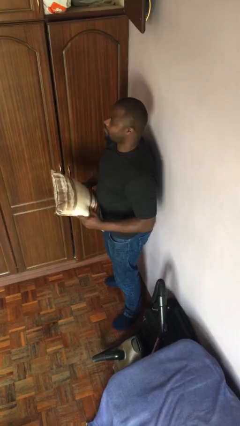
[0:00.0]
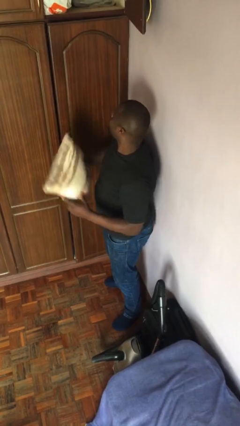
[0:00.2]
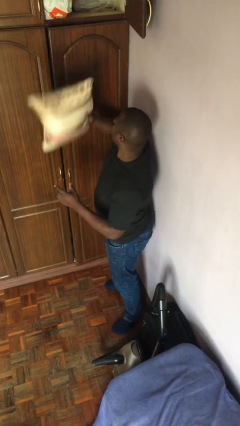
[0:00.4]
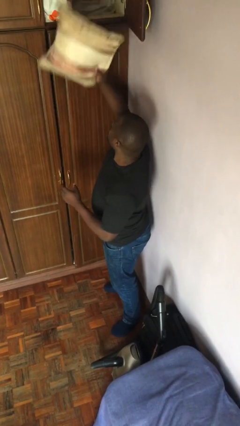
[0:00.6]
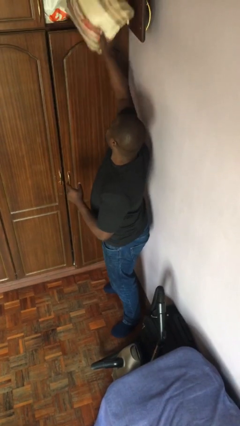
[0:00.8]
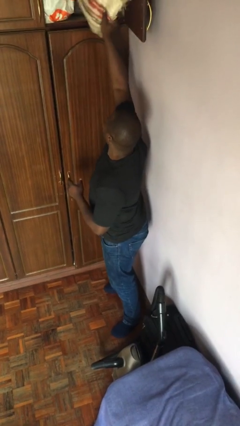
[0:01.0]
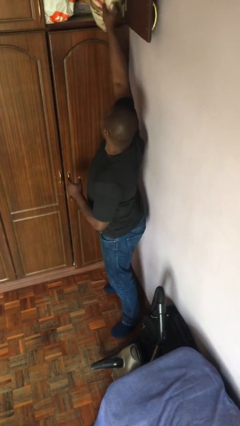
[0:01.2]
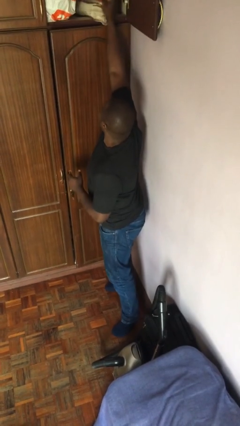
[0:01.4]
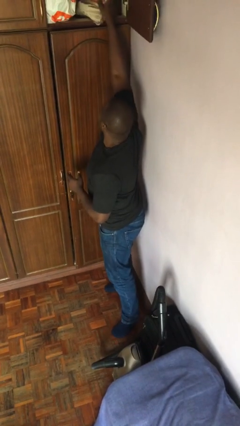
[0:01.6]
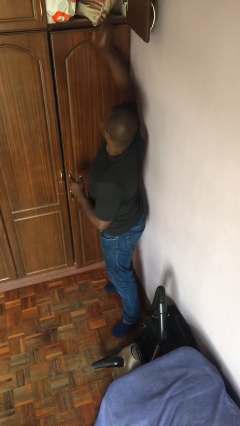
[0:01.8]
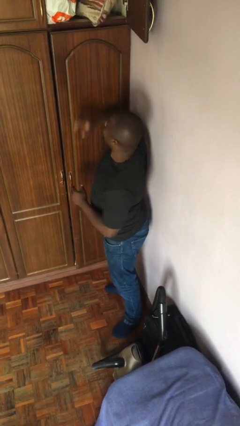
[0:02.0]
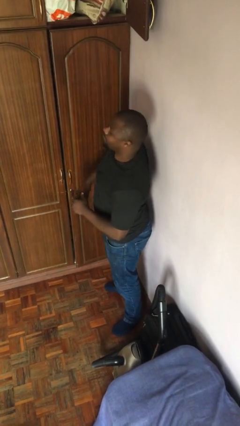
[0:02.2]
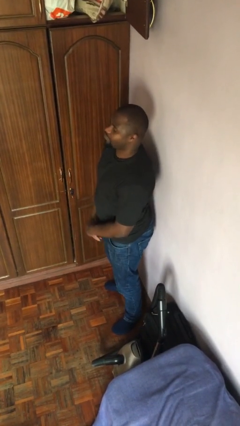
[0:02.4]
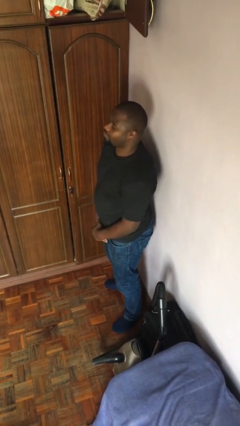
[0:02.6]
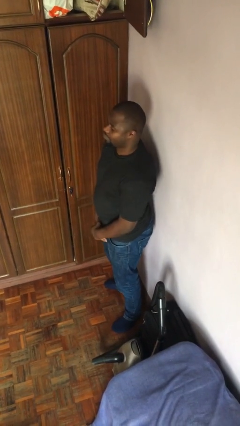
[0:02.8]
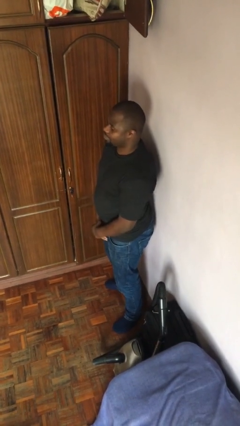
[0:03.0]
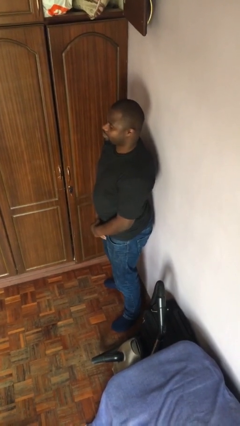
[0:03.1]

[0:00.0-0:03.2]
person puts down object on shelf

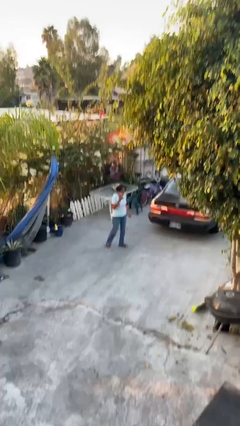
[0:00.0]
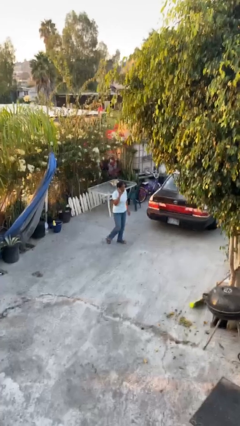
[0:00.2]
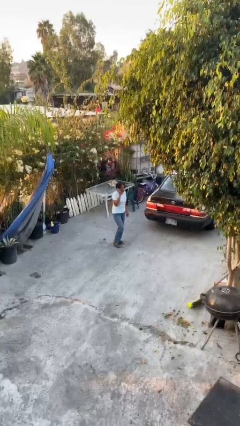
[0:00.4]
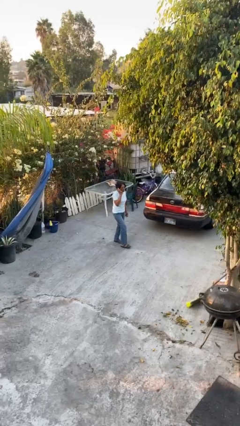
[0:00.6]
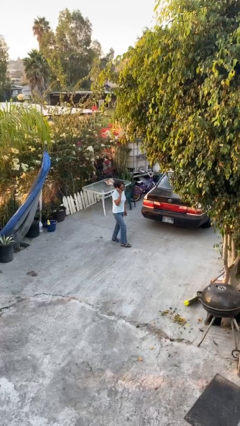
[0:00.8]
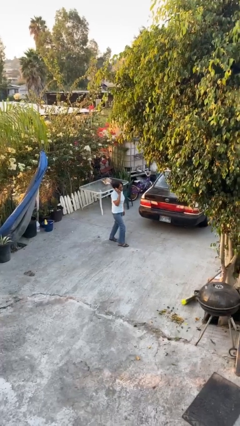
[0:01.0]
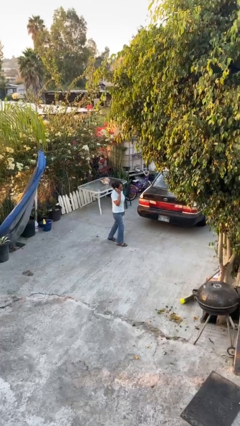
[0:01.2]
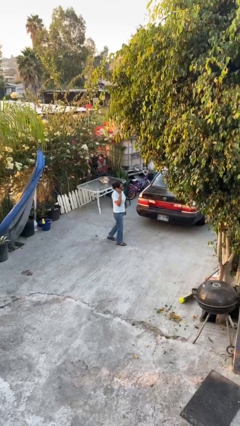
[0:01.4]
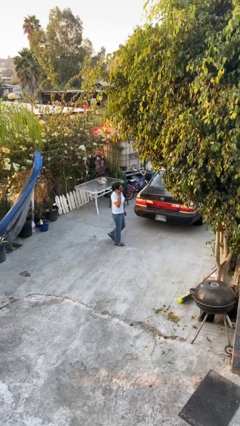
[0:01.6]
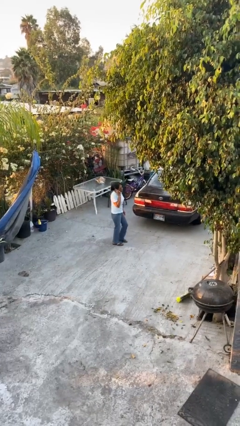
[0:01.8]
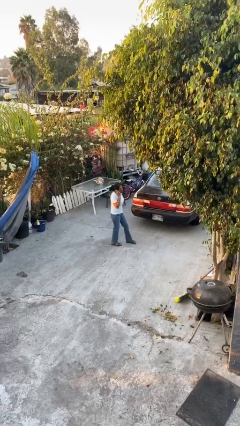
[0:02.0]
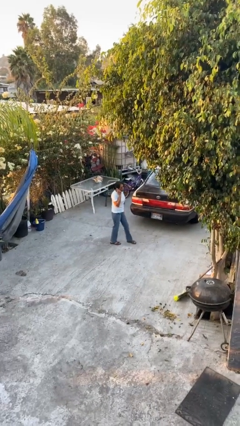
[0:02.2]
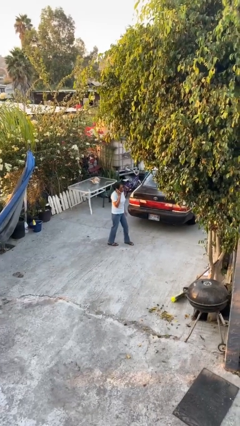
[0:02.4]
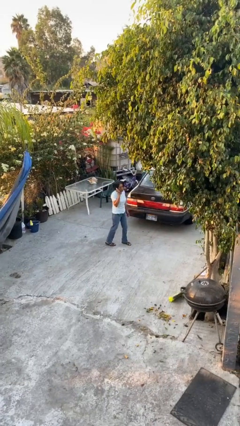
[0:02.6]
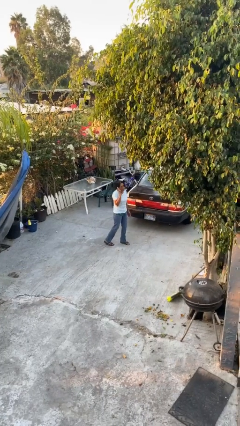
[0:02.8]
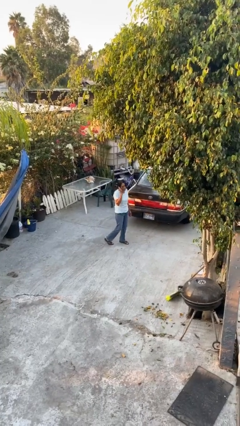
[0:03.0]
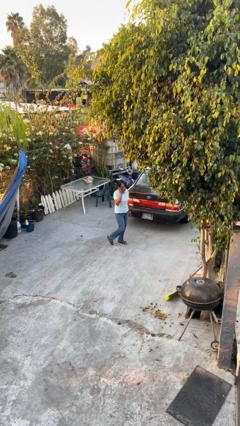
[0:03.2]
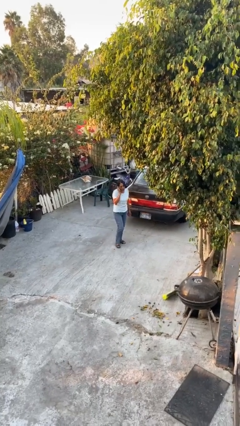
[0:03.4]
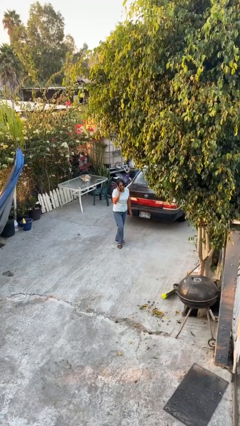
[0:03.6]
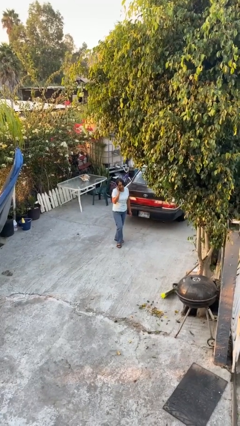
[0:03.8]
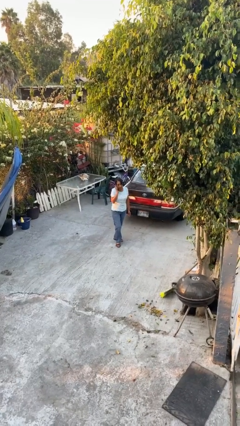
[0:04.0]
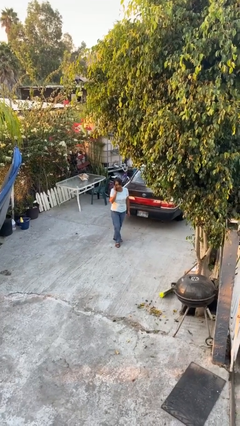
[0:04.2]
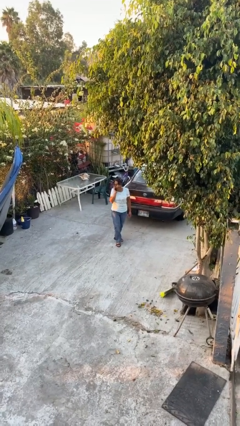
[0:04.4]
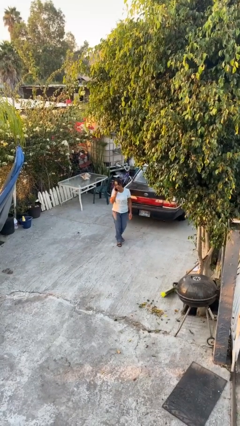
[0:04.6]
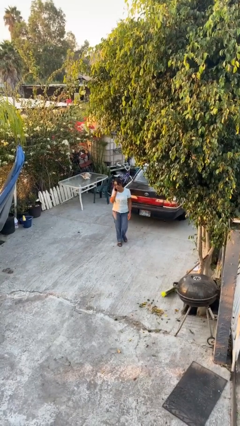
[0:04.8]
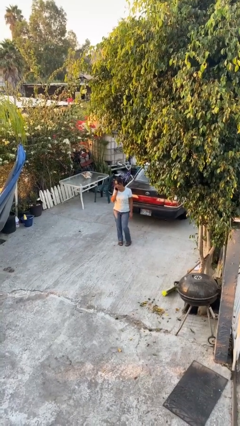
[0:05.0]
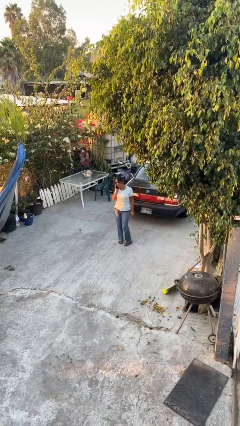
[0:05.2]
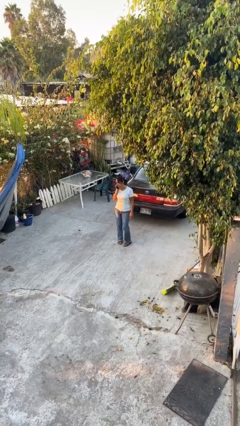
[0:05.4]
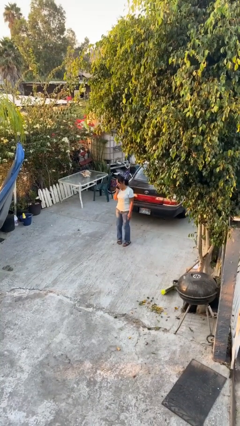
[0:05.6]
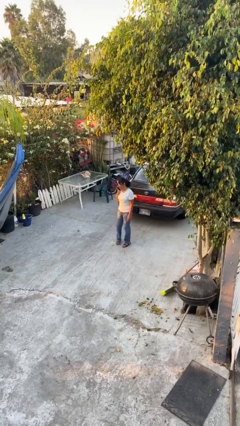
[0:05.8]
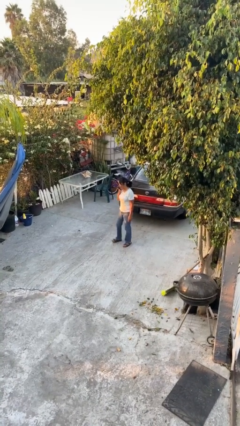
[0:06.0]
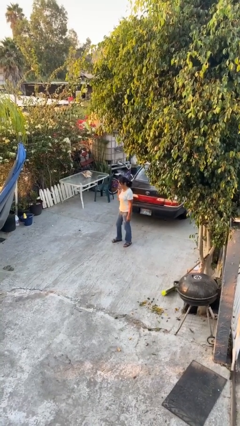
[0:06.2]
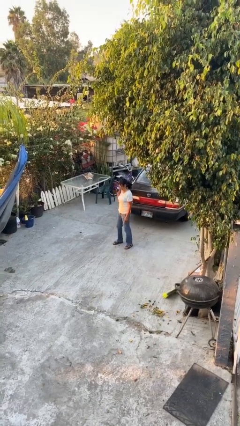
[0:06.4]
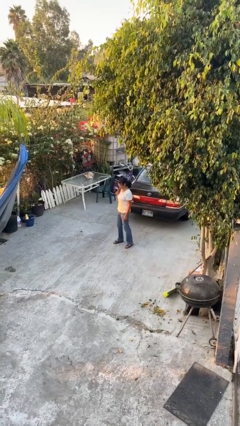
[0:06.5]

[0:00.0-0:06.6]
person talks on phone

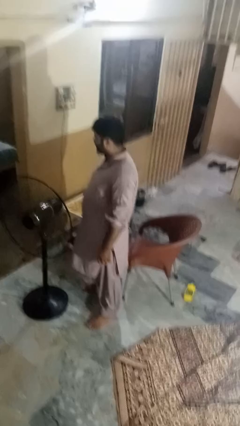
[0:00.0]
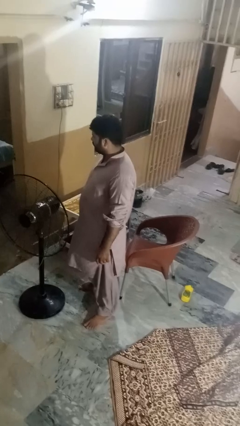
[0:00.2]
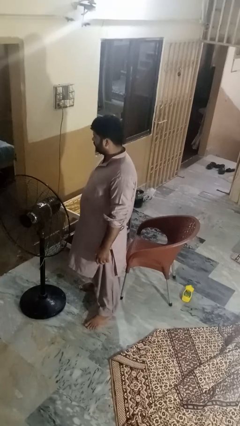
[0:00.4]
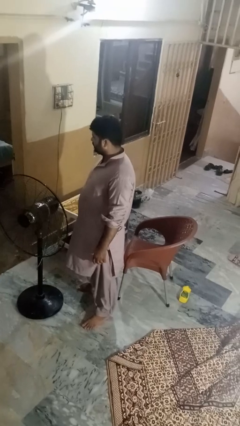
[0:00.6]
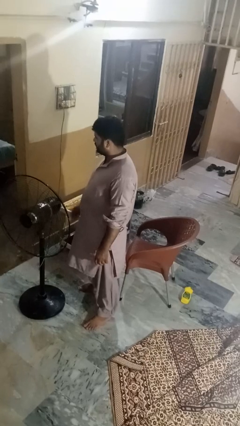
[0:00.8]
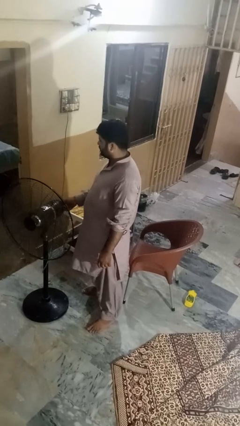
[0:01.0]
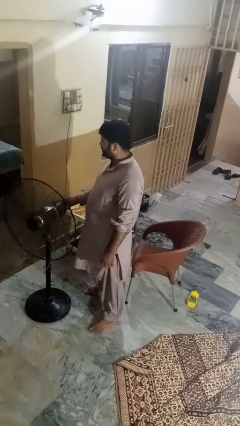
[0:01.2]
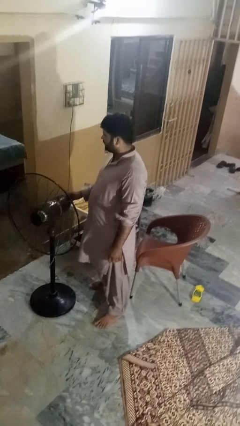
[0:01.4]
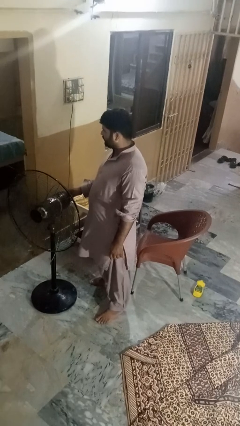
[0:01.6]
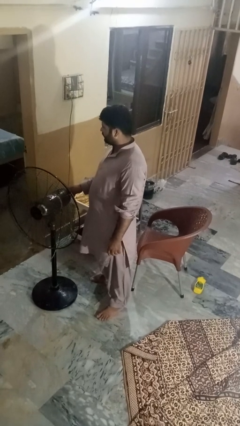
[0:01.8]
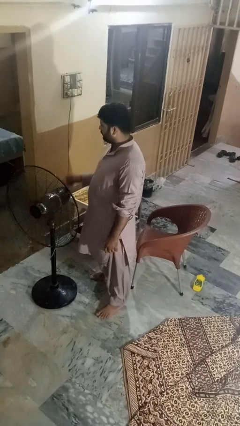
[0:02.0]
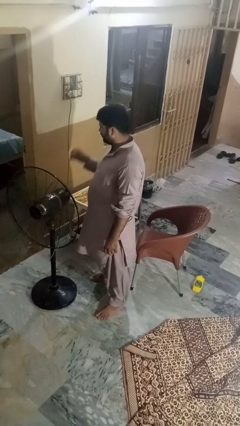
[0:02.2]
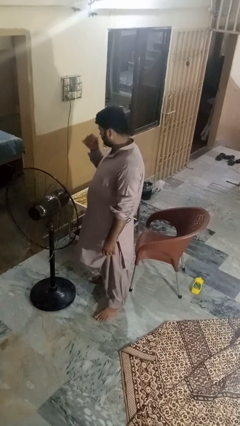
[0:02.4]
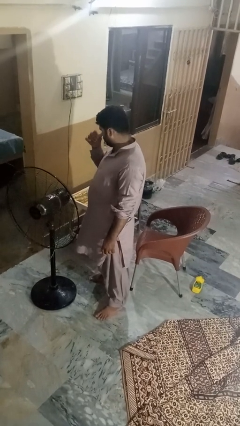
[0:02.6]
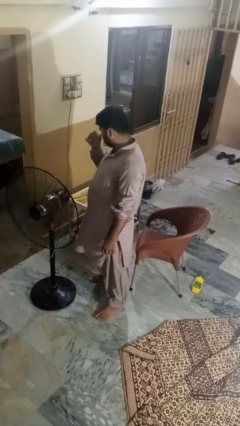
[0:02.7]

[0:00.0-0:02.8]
person turns on fan

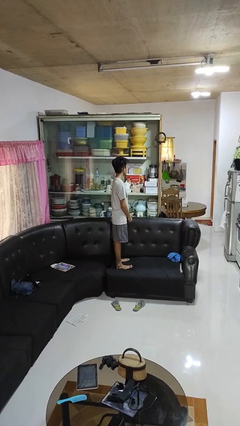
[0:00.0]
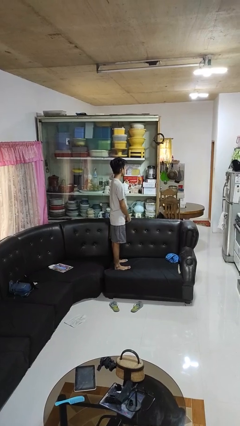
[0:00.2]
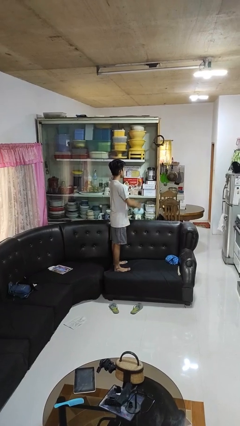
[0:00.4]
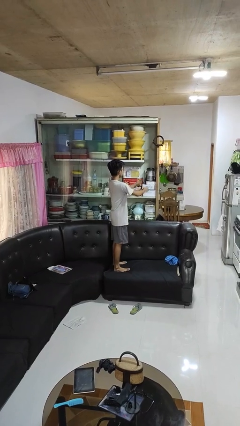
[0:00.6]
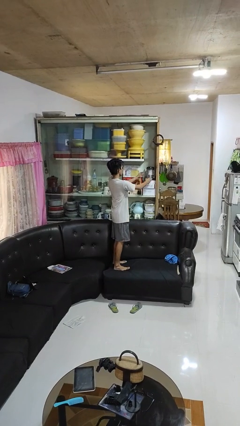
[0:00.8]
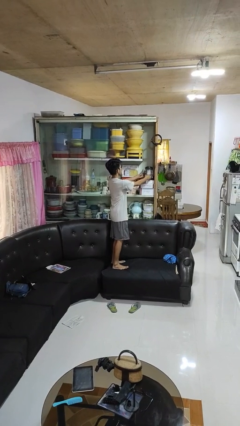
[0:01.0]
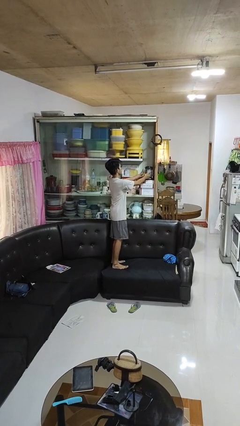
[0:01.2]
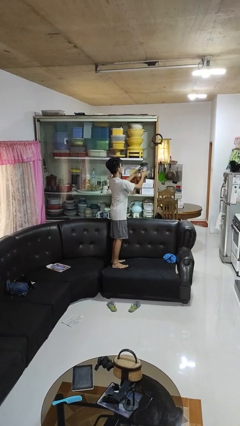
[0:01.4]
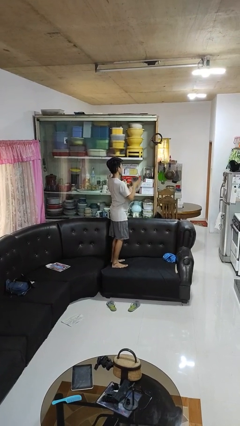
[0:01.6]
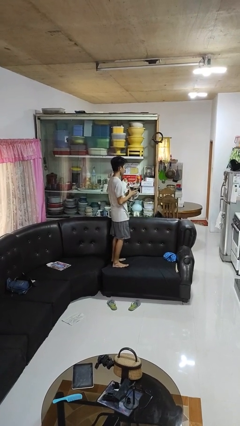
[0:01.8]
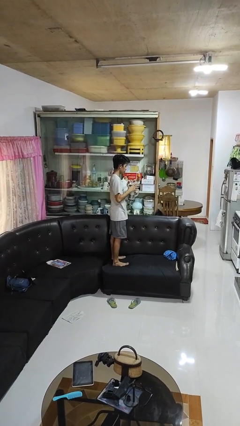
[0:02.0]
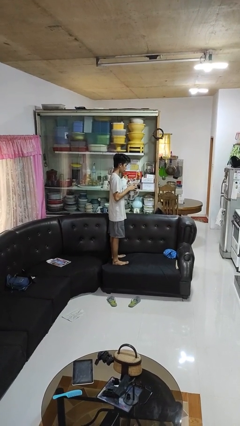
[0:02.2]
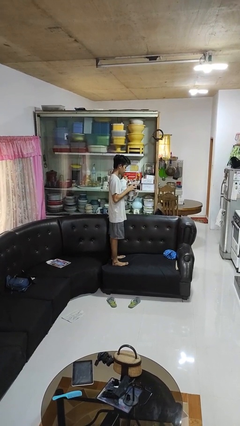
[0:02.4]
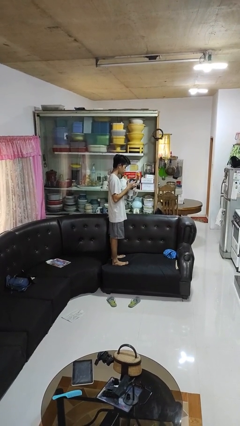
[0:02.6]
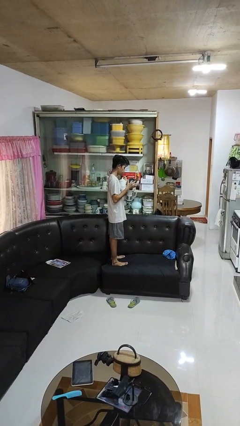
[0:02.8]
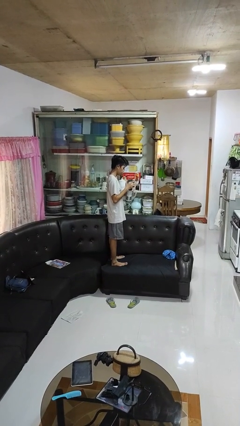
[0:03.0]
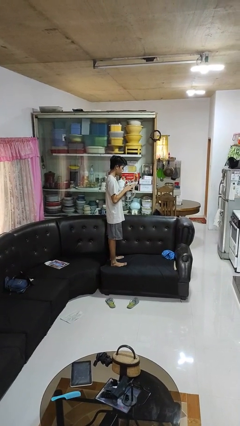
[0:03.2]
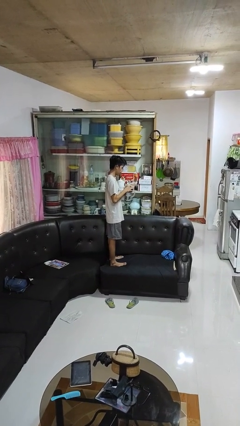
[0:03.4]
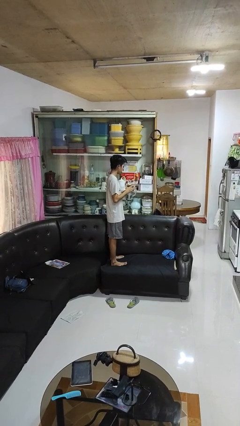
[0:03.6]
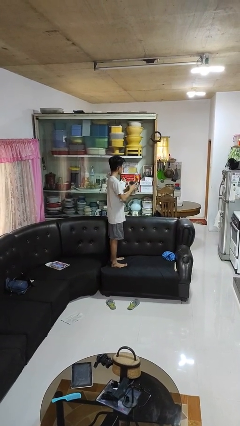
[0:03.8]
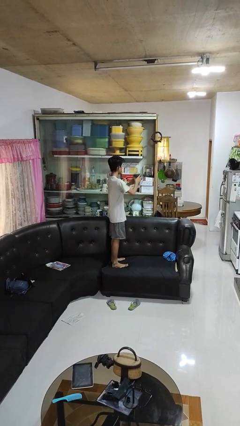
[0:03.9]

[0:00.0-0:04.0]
person picks up object from cabinet

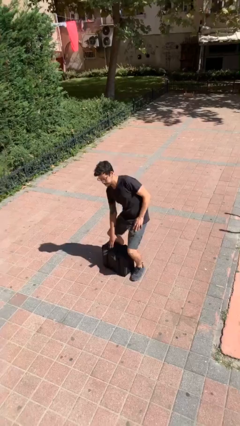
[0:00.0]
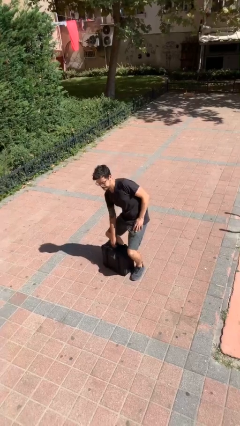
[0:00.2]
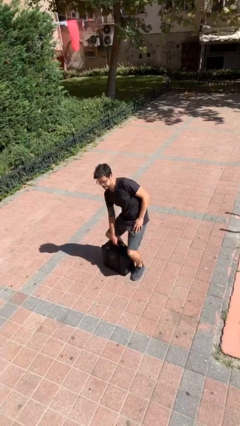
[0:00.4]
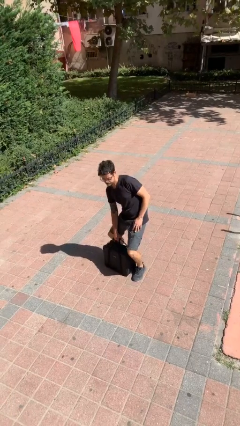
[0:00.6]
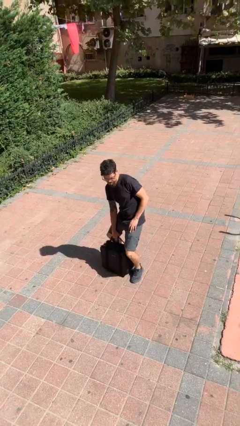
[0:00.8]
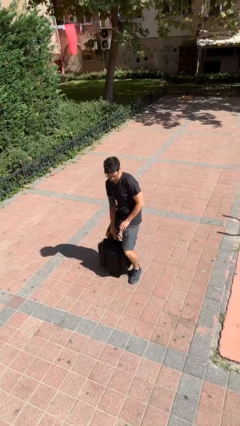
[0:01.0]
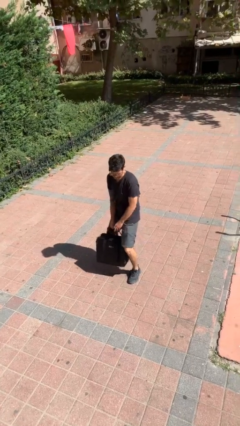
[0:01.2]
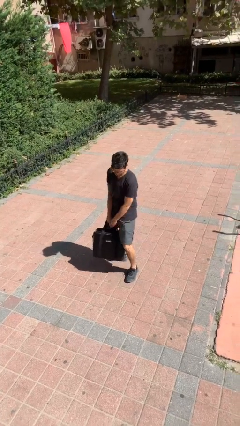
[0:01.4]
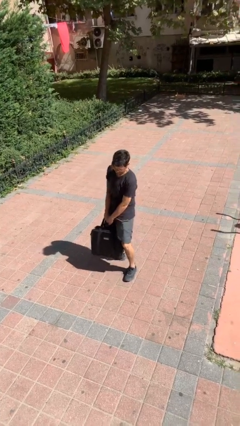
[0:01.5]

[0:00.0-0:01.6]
person picks up object from floor
